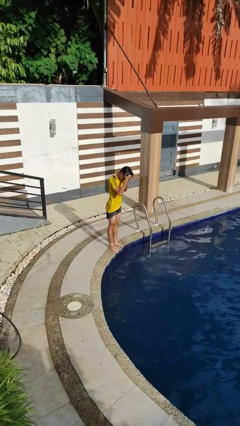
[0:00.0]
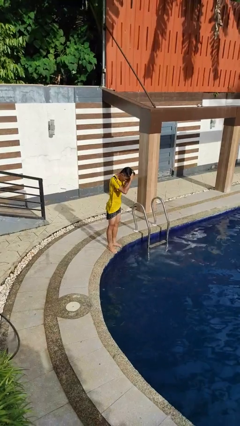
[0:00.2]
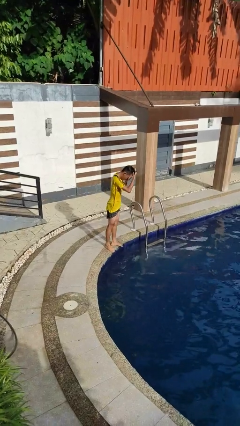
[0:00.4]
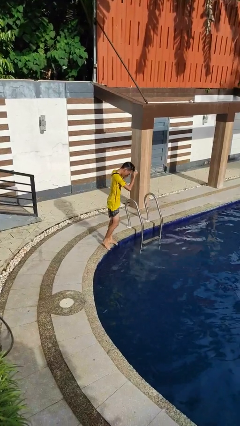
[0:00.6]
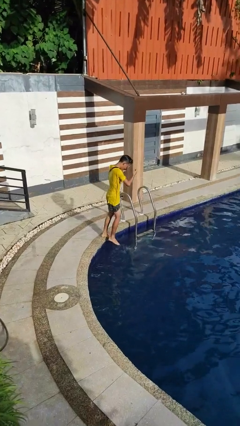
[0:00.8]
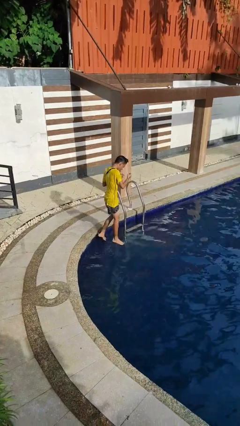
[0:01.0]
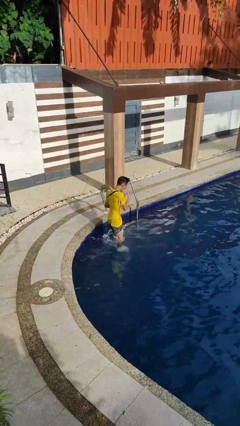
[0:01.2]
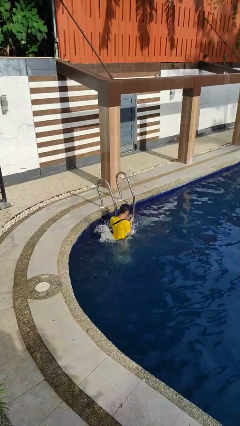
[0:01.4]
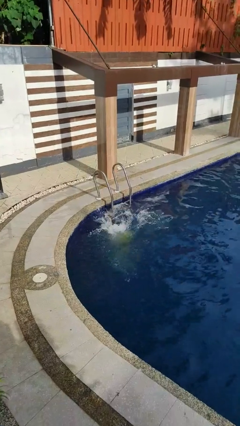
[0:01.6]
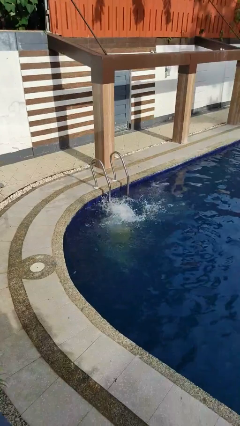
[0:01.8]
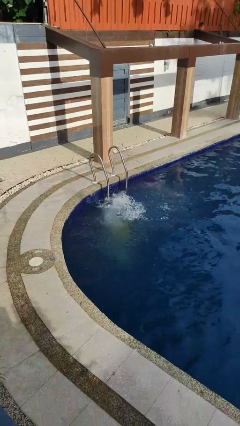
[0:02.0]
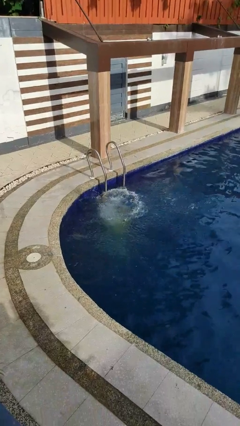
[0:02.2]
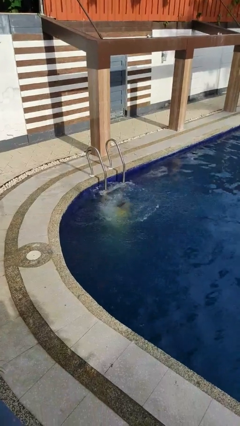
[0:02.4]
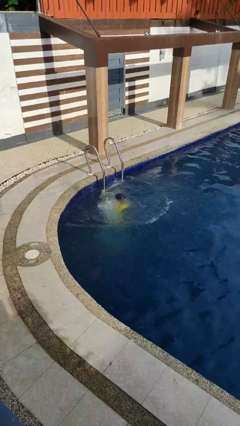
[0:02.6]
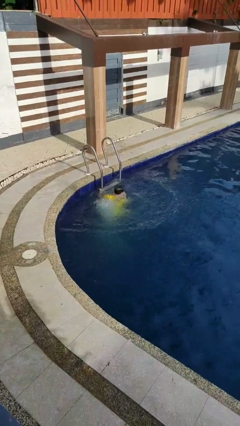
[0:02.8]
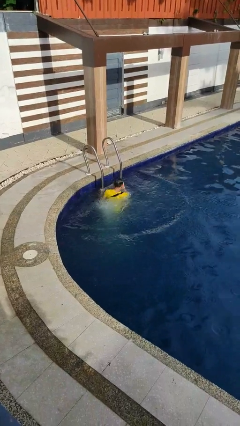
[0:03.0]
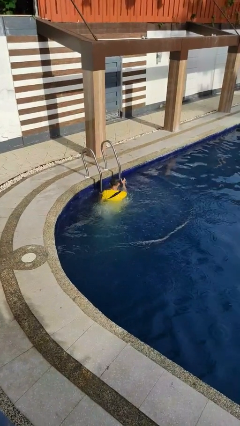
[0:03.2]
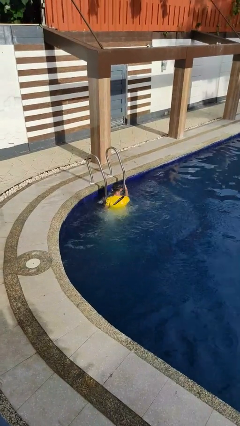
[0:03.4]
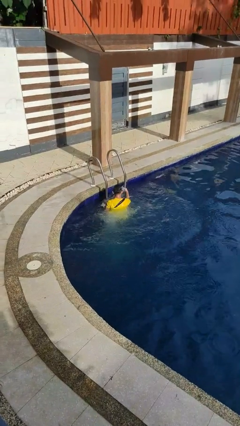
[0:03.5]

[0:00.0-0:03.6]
person falls into pool

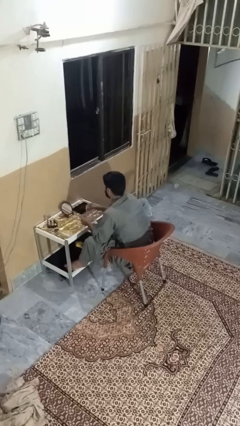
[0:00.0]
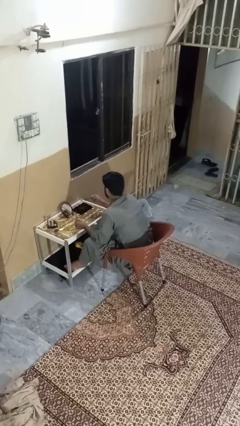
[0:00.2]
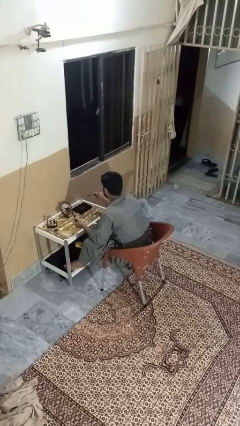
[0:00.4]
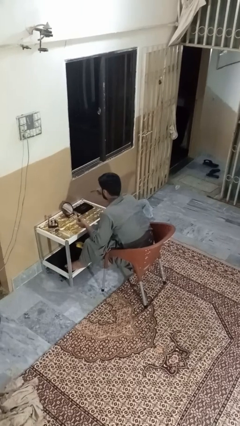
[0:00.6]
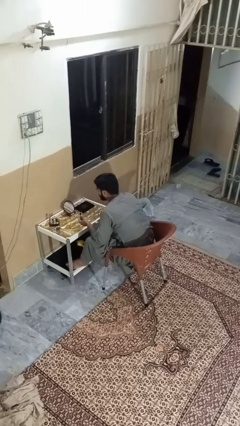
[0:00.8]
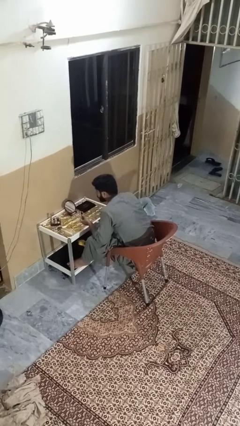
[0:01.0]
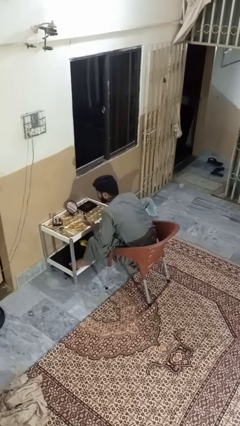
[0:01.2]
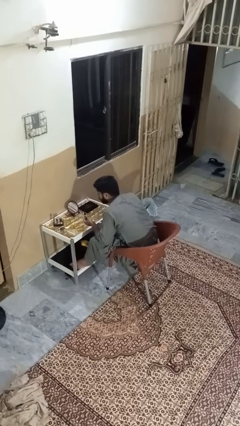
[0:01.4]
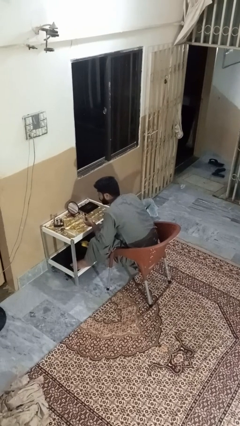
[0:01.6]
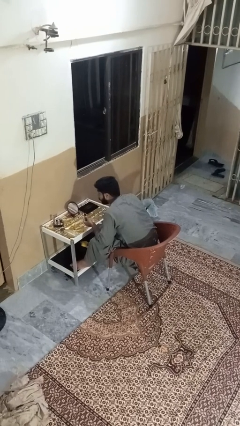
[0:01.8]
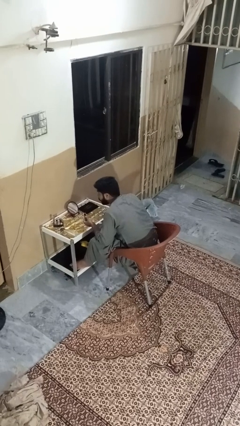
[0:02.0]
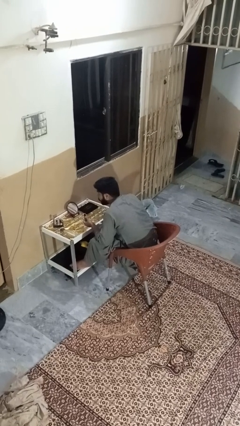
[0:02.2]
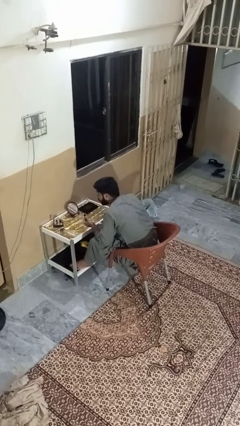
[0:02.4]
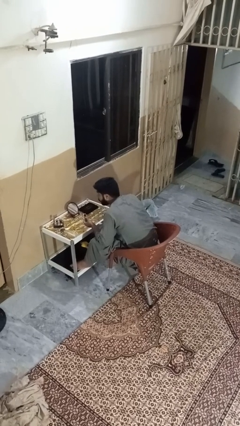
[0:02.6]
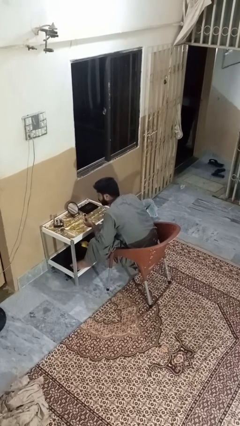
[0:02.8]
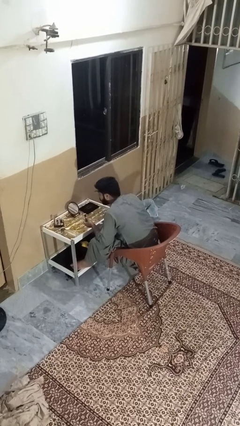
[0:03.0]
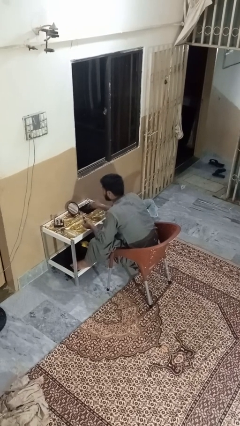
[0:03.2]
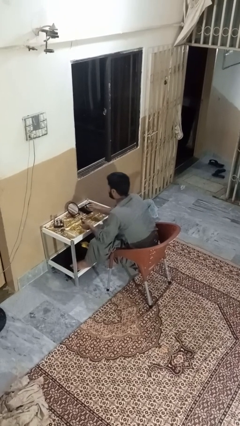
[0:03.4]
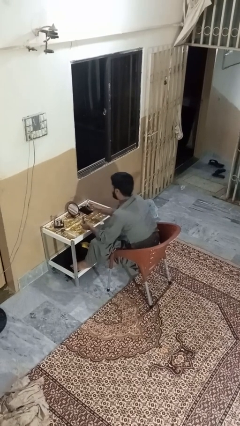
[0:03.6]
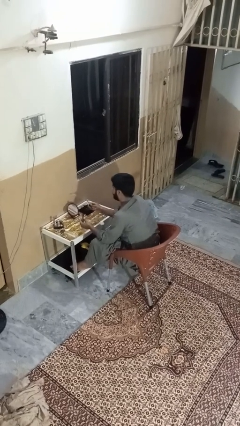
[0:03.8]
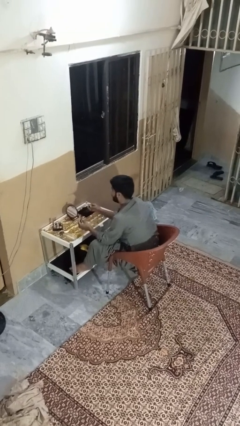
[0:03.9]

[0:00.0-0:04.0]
person applies eye makeup

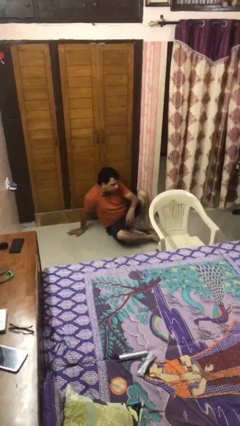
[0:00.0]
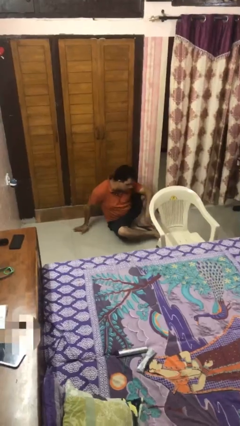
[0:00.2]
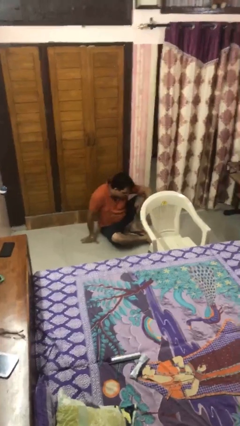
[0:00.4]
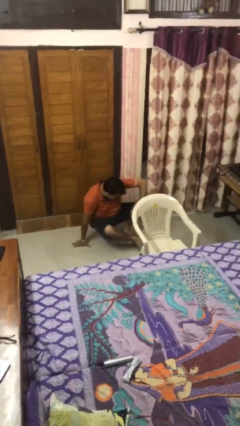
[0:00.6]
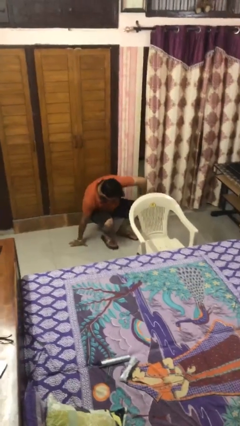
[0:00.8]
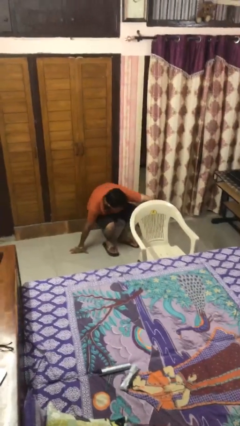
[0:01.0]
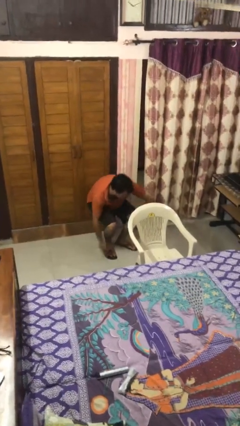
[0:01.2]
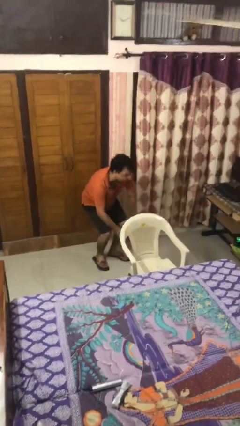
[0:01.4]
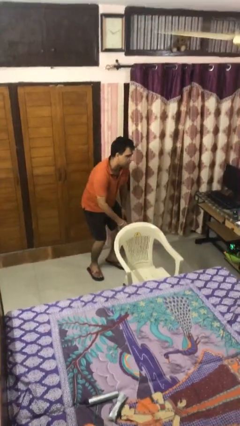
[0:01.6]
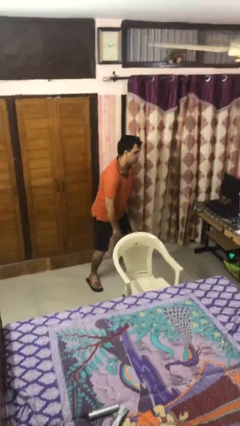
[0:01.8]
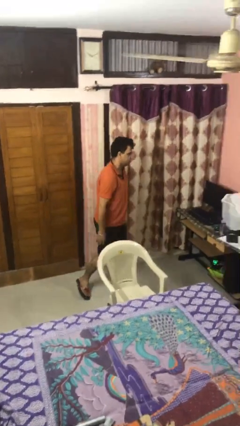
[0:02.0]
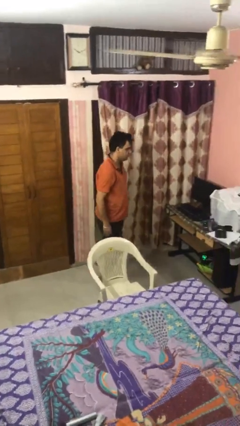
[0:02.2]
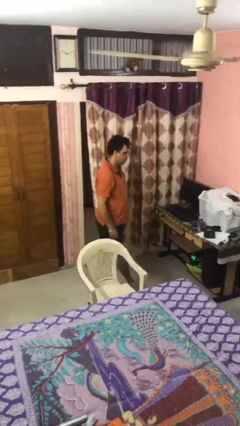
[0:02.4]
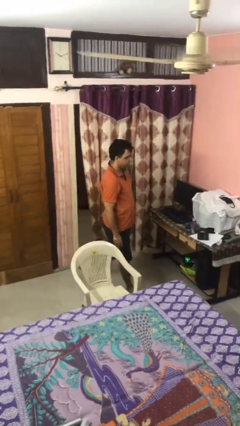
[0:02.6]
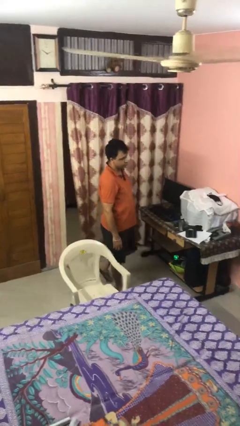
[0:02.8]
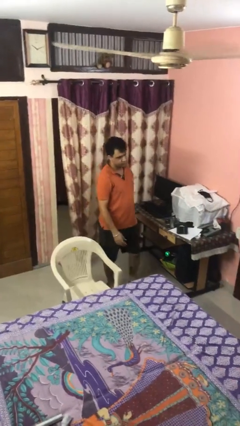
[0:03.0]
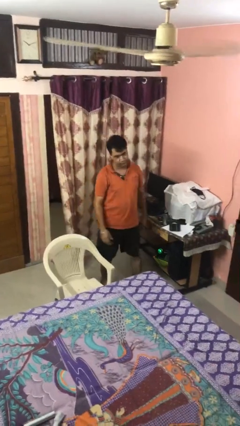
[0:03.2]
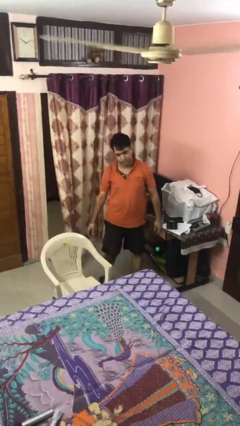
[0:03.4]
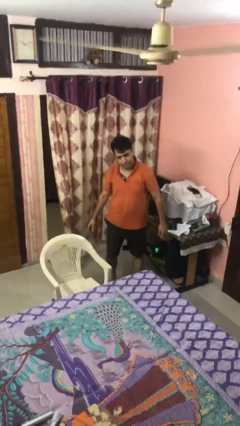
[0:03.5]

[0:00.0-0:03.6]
person stands up from floor

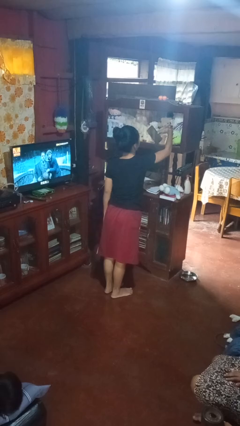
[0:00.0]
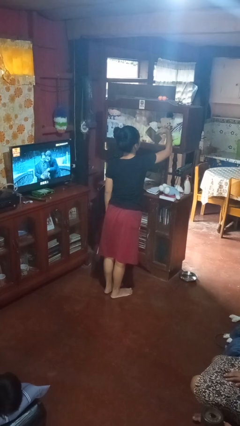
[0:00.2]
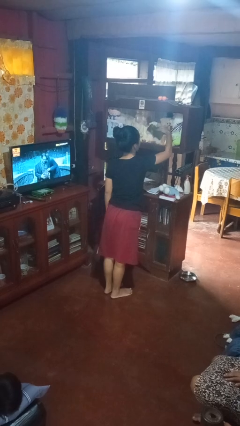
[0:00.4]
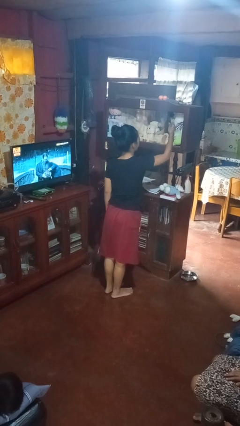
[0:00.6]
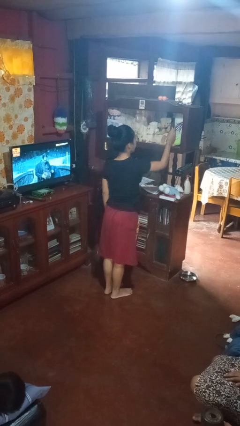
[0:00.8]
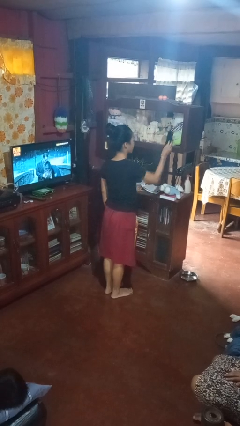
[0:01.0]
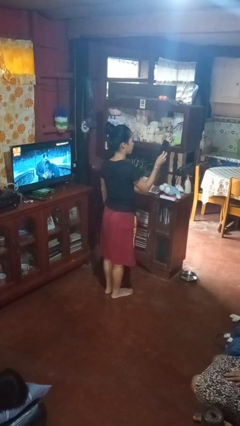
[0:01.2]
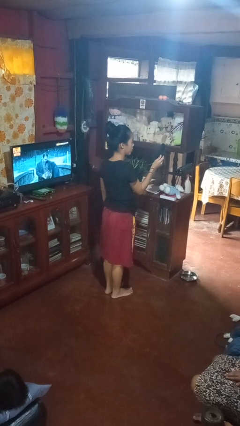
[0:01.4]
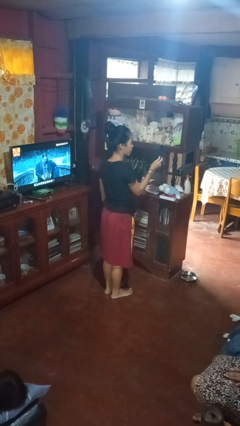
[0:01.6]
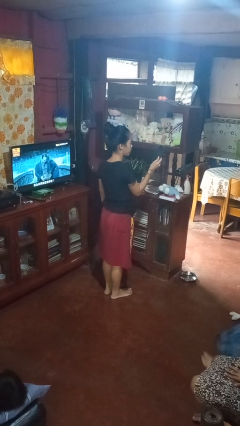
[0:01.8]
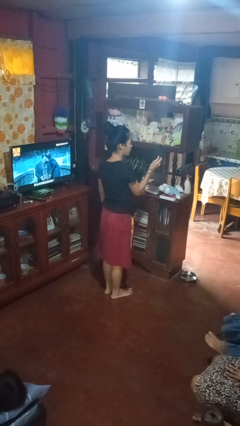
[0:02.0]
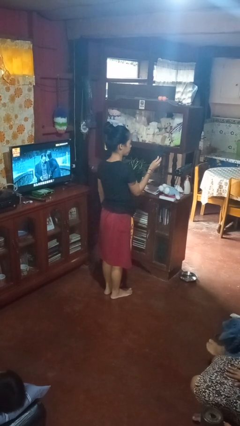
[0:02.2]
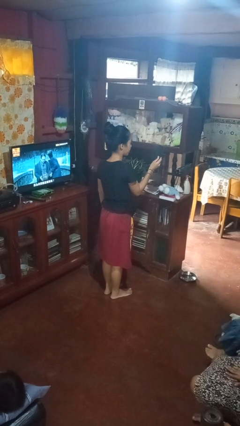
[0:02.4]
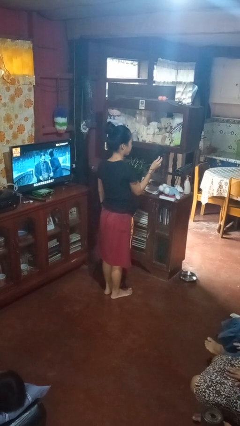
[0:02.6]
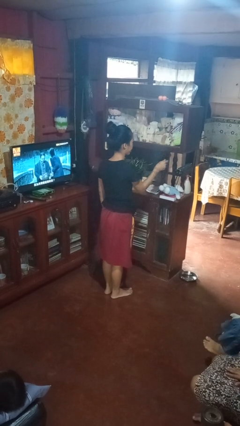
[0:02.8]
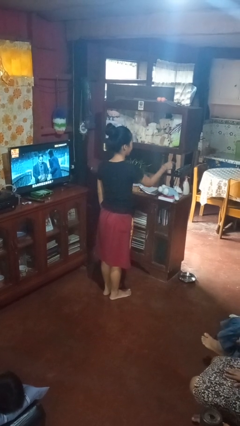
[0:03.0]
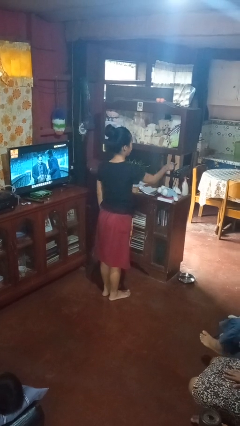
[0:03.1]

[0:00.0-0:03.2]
person picks up object from shelf

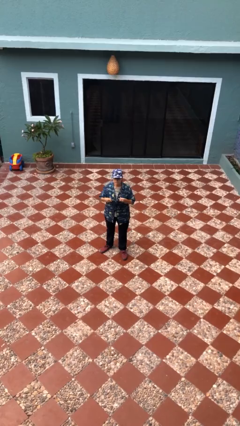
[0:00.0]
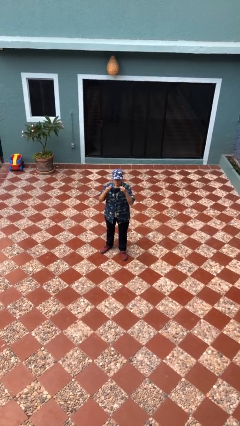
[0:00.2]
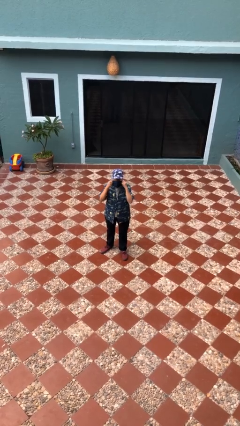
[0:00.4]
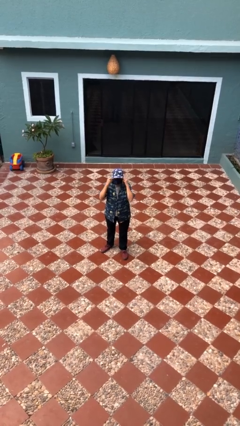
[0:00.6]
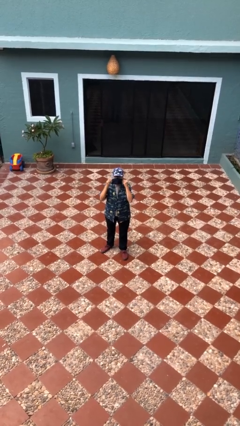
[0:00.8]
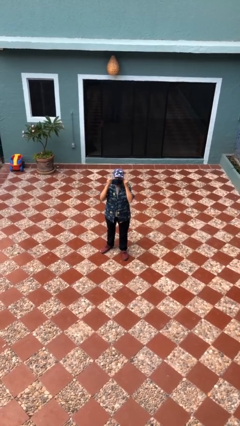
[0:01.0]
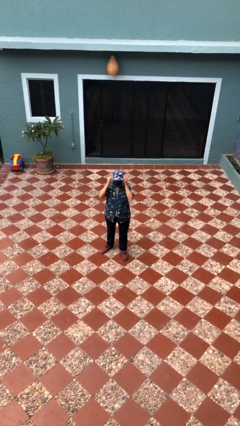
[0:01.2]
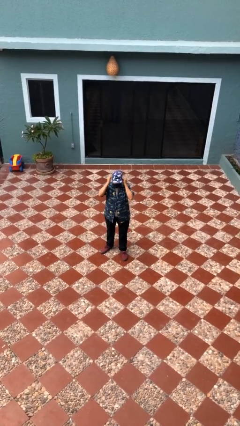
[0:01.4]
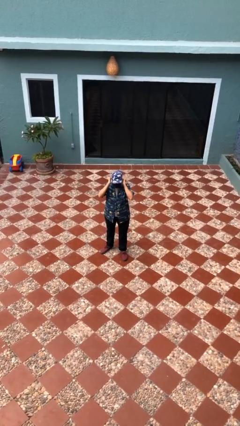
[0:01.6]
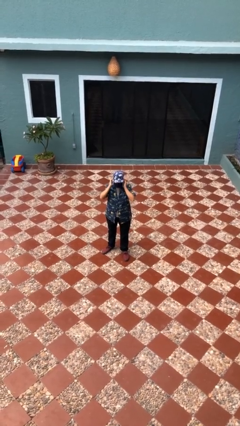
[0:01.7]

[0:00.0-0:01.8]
person puts on facemask

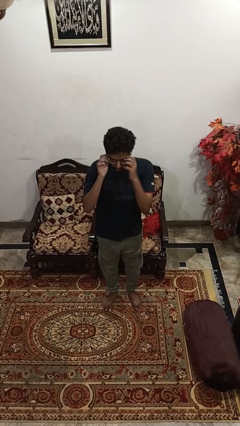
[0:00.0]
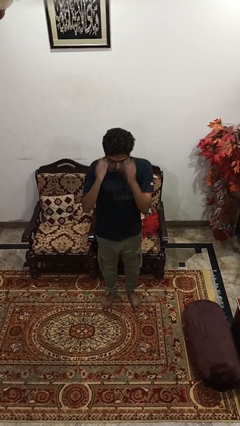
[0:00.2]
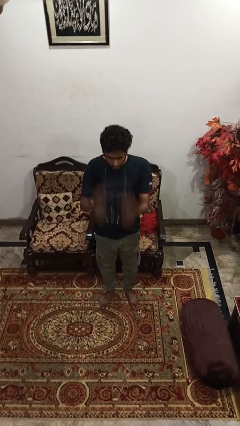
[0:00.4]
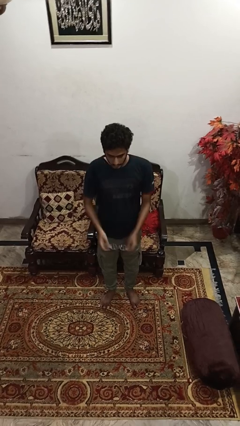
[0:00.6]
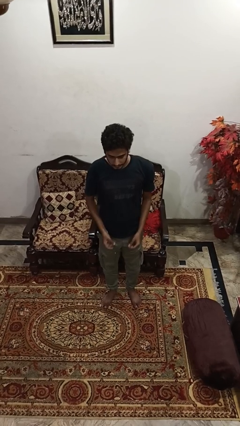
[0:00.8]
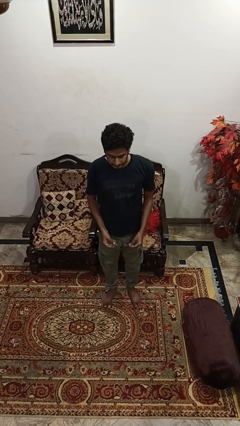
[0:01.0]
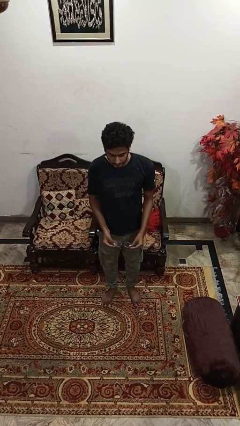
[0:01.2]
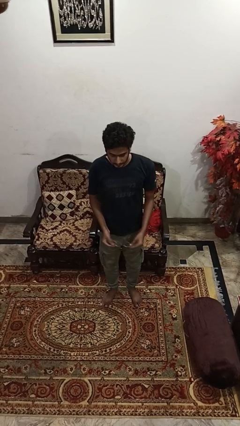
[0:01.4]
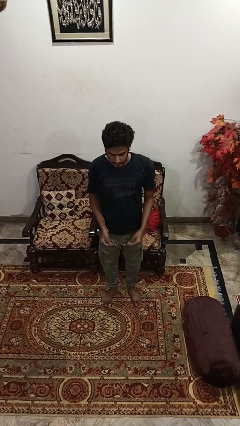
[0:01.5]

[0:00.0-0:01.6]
person takes off glasses
